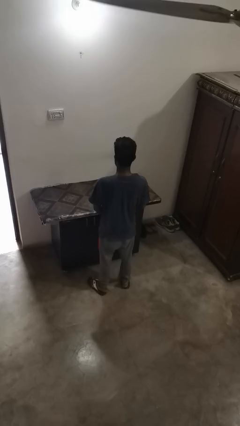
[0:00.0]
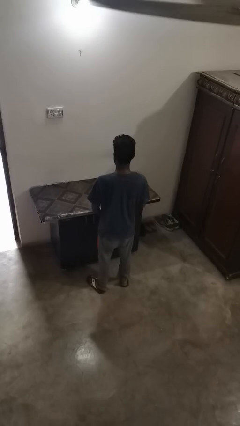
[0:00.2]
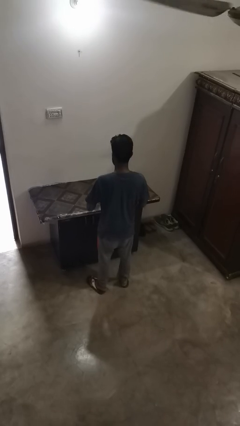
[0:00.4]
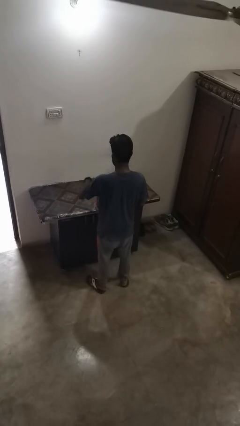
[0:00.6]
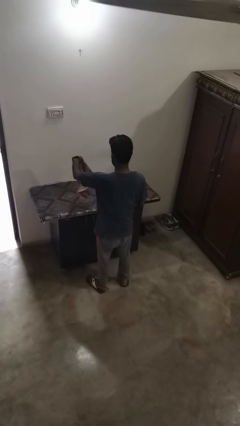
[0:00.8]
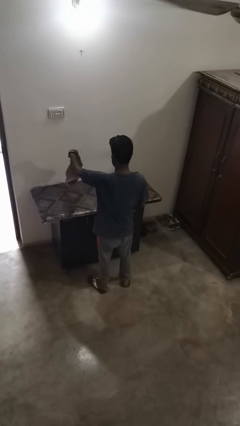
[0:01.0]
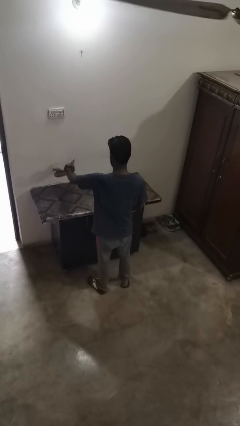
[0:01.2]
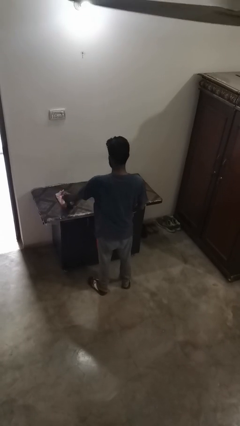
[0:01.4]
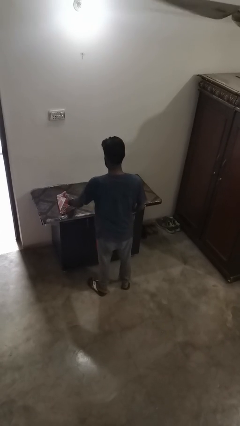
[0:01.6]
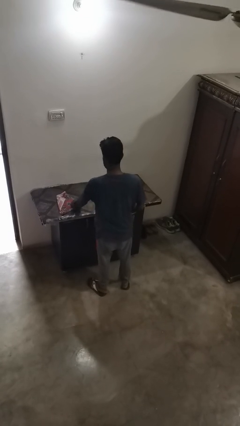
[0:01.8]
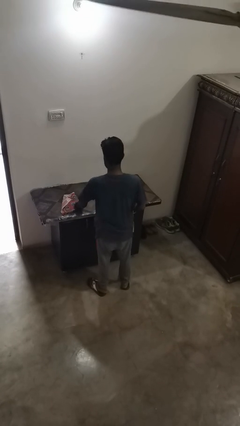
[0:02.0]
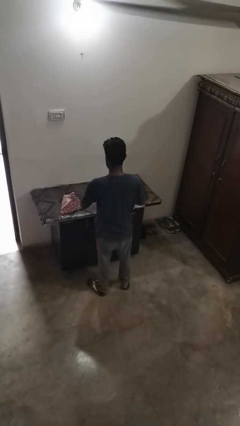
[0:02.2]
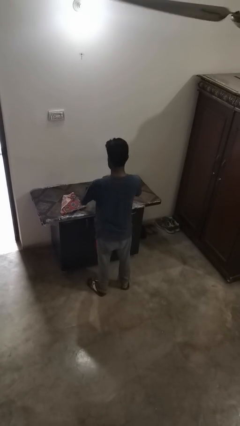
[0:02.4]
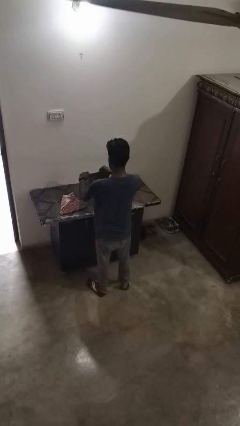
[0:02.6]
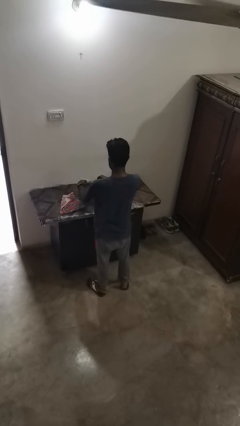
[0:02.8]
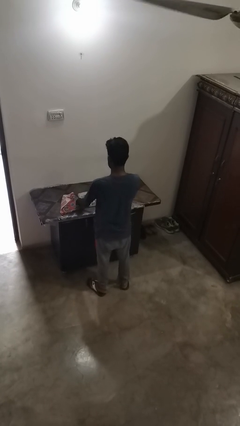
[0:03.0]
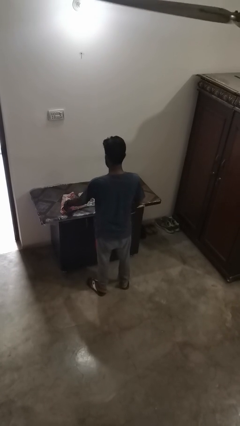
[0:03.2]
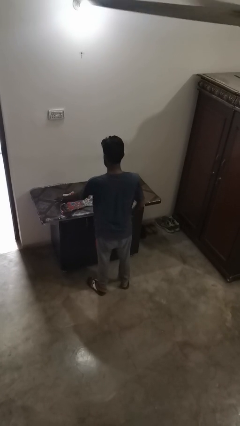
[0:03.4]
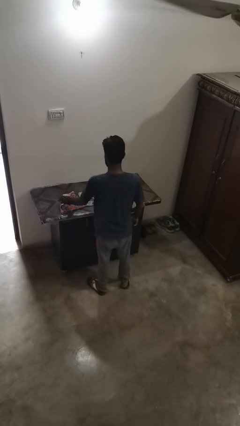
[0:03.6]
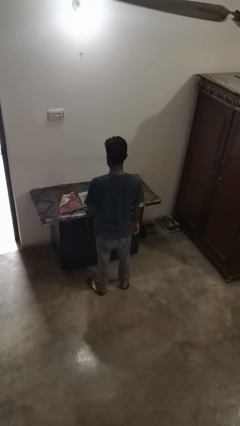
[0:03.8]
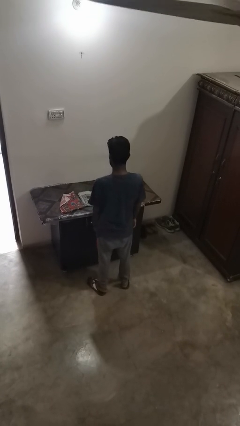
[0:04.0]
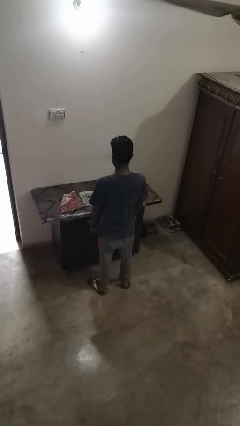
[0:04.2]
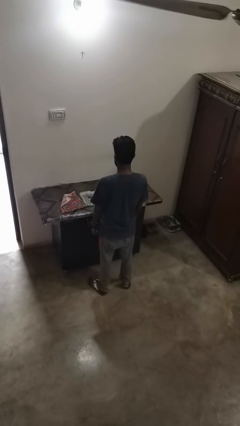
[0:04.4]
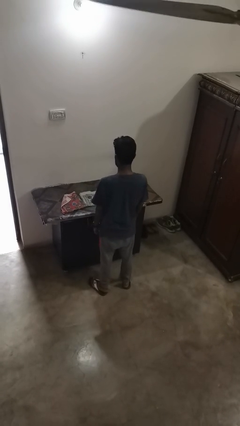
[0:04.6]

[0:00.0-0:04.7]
person spreads tablecloth

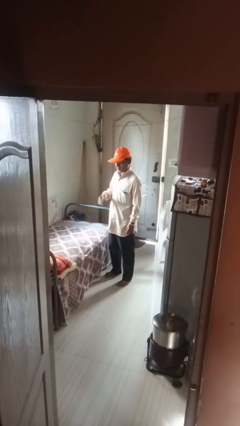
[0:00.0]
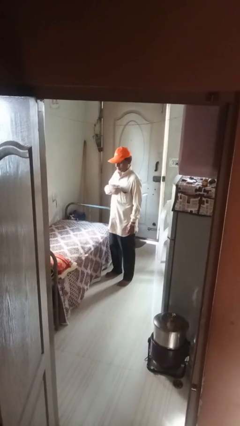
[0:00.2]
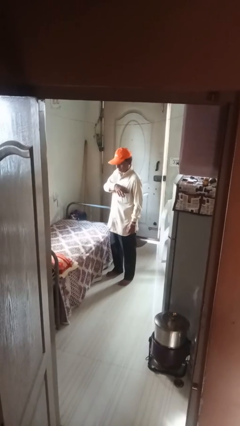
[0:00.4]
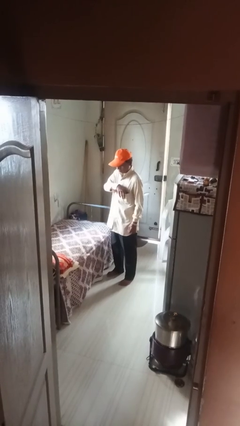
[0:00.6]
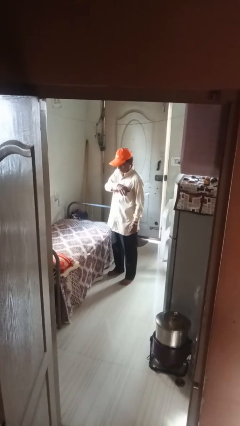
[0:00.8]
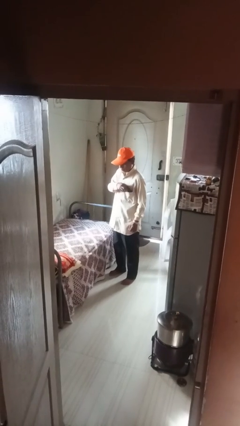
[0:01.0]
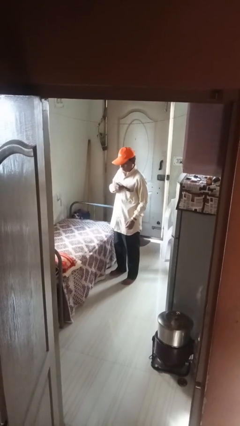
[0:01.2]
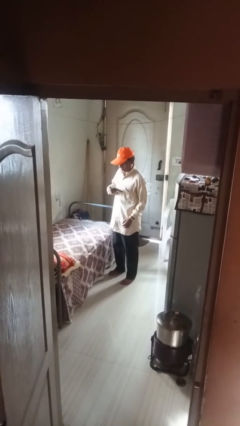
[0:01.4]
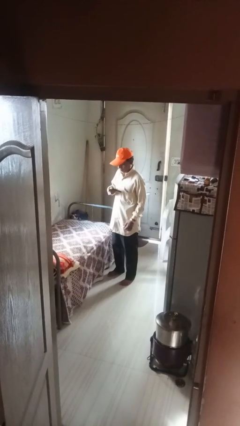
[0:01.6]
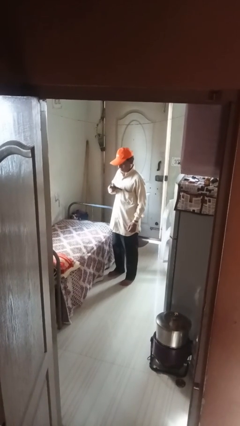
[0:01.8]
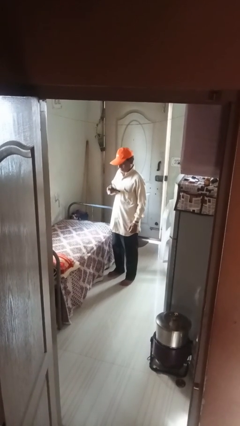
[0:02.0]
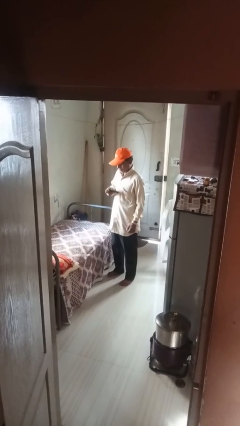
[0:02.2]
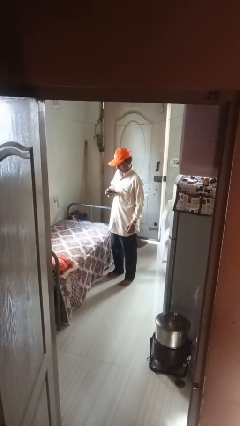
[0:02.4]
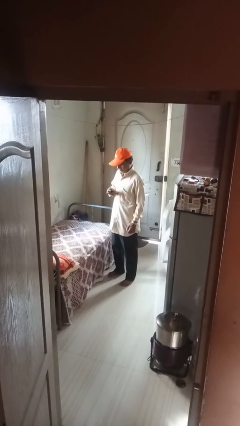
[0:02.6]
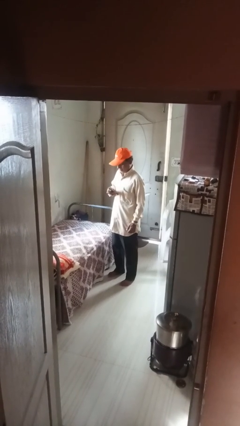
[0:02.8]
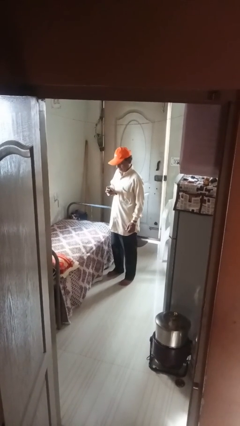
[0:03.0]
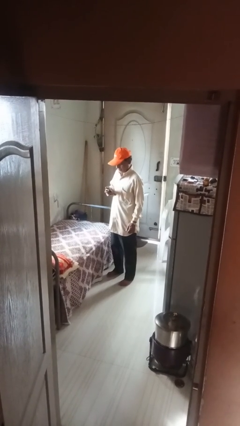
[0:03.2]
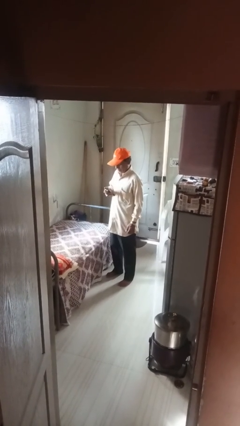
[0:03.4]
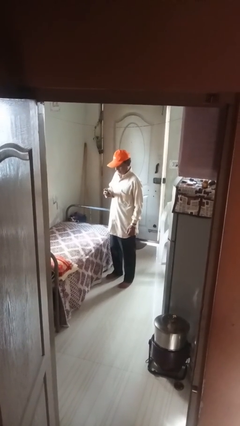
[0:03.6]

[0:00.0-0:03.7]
person takes phone from pocket

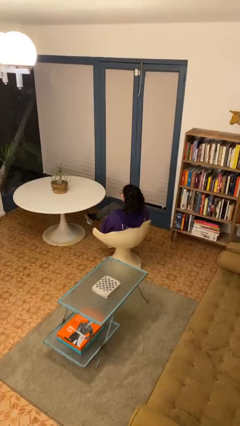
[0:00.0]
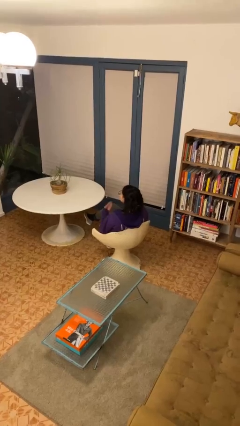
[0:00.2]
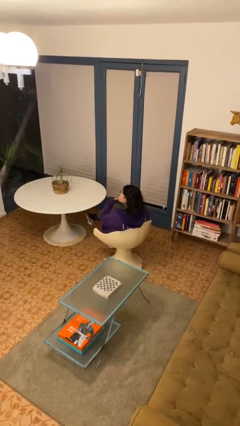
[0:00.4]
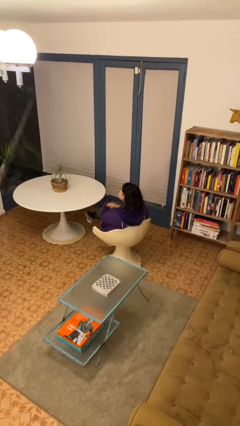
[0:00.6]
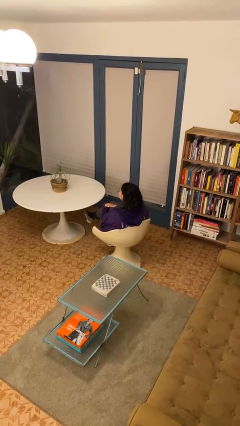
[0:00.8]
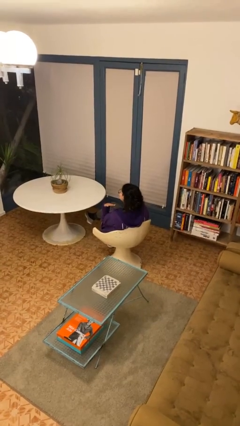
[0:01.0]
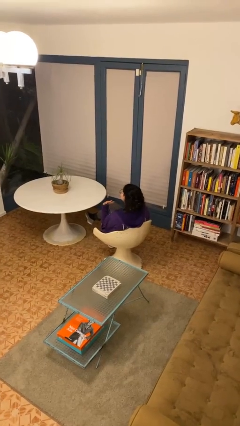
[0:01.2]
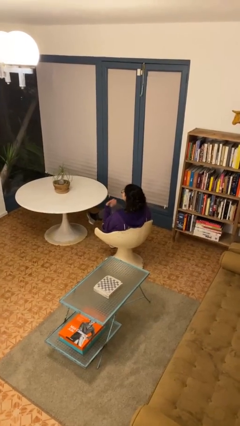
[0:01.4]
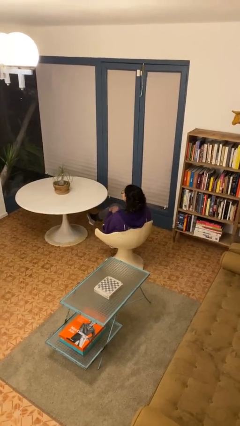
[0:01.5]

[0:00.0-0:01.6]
person gestures cut

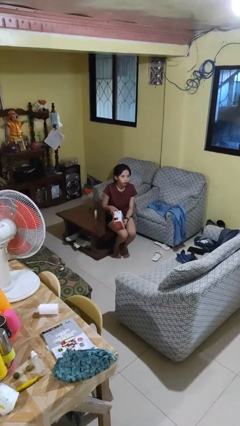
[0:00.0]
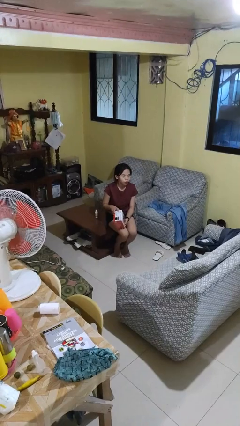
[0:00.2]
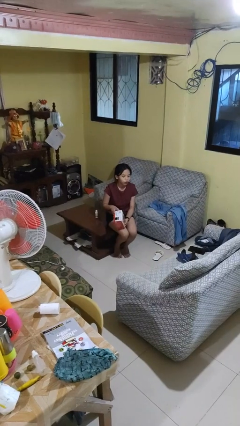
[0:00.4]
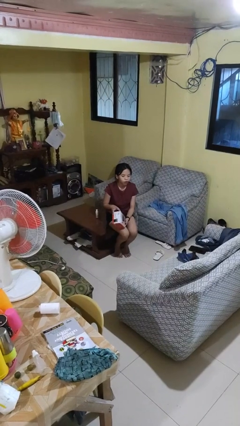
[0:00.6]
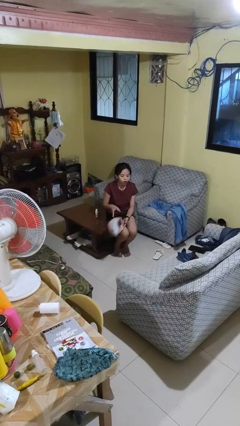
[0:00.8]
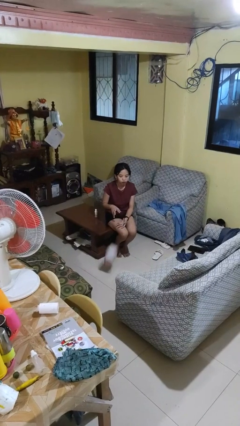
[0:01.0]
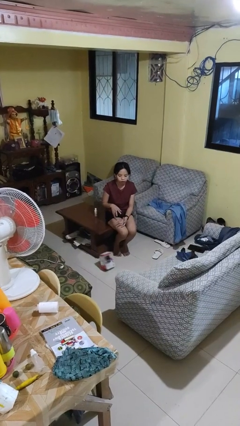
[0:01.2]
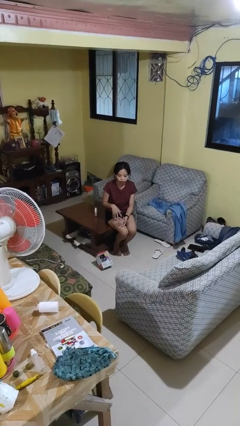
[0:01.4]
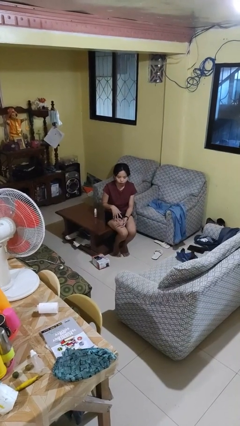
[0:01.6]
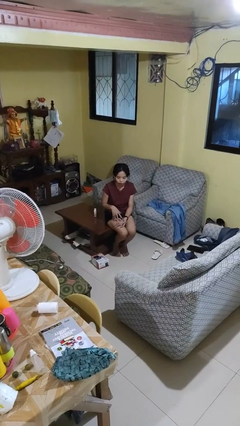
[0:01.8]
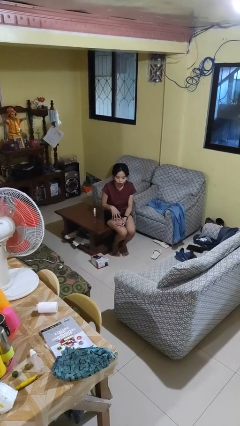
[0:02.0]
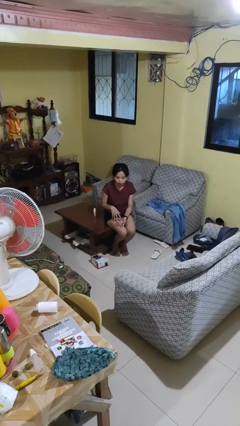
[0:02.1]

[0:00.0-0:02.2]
person drops object

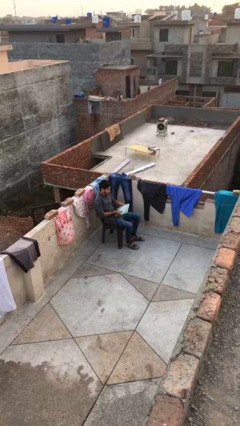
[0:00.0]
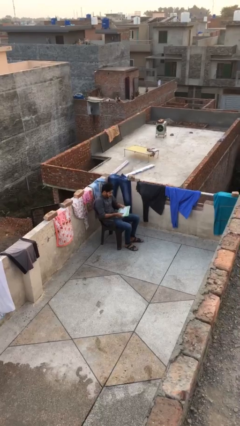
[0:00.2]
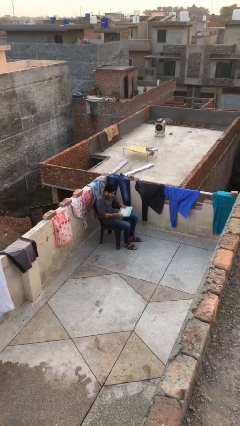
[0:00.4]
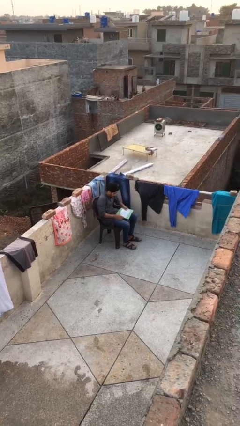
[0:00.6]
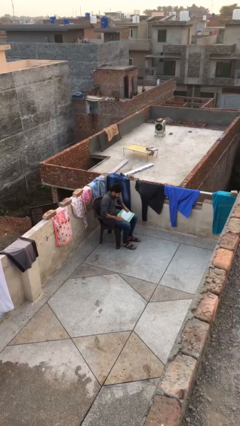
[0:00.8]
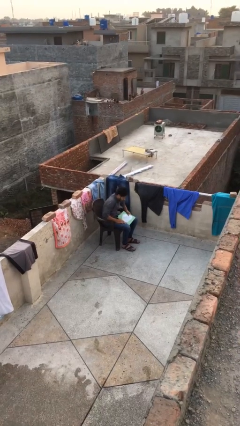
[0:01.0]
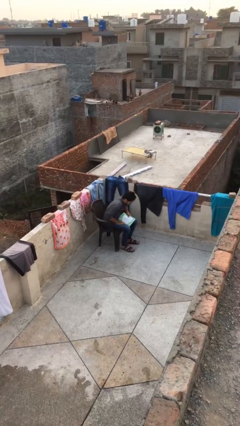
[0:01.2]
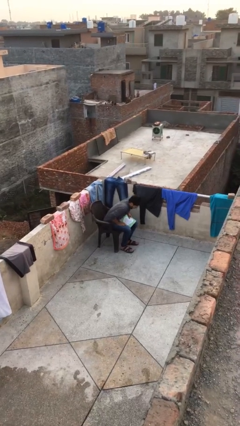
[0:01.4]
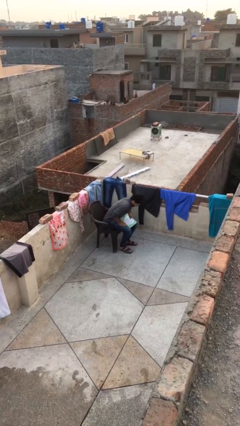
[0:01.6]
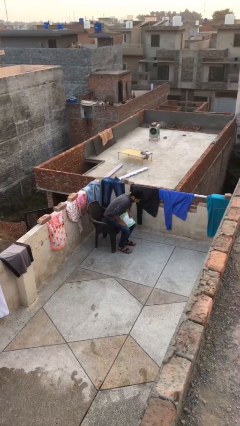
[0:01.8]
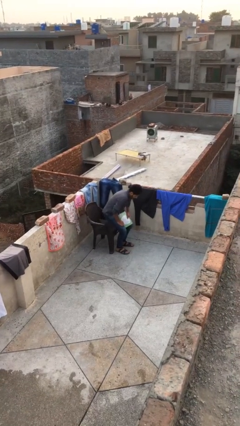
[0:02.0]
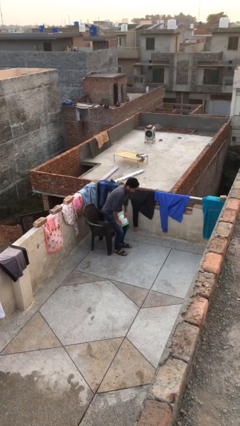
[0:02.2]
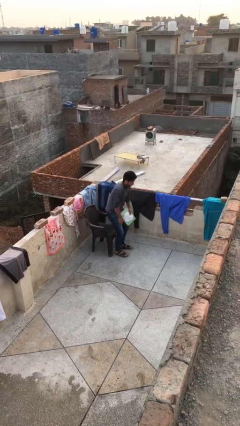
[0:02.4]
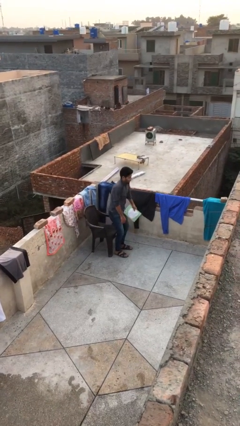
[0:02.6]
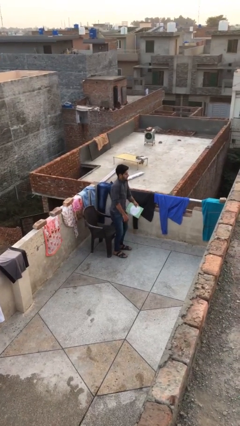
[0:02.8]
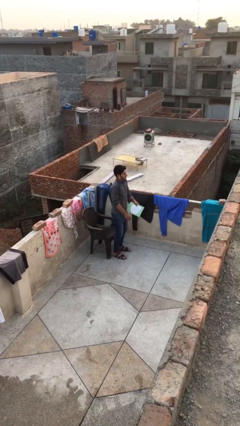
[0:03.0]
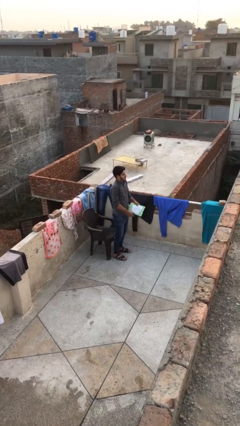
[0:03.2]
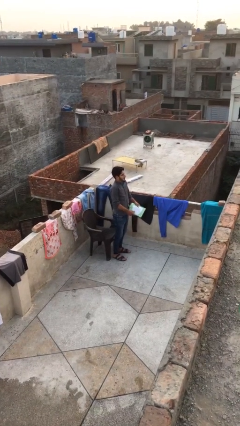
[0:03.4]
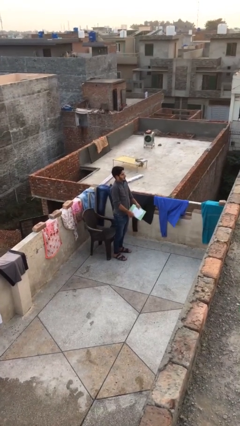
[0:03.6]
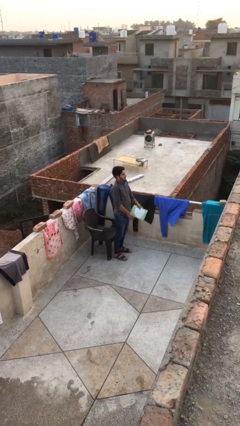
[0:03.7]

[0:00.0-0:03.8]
person stands up

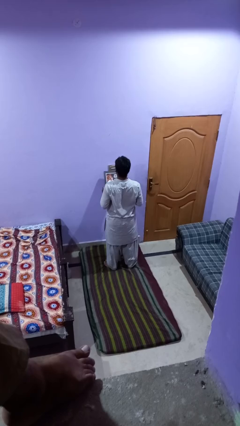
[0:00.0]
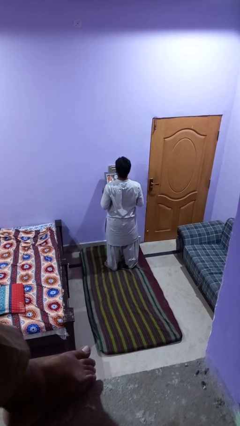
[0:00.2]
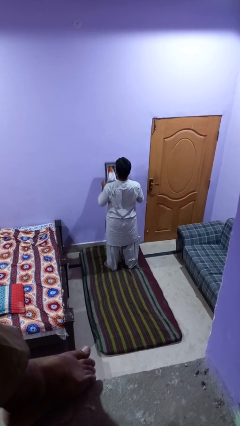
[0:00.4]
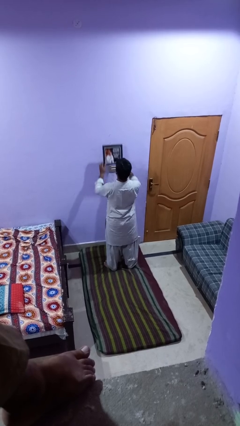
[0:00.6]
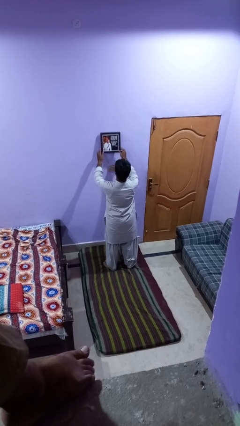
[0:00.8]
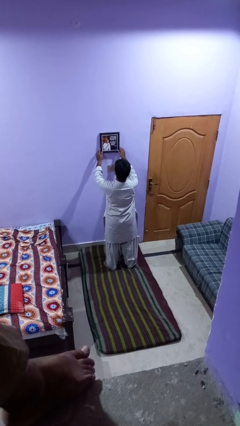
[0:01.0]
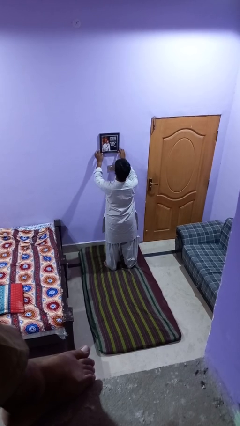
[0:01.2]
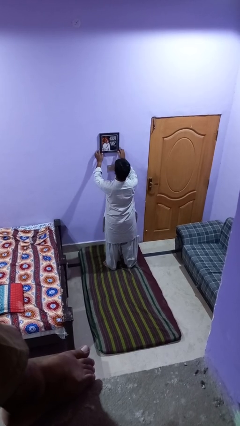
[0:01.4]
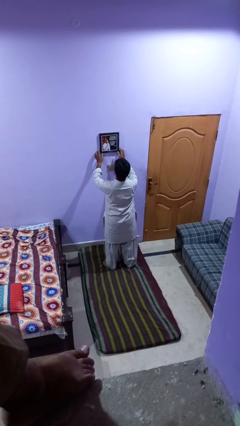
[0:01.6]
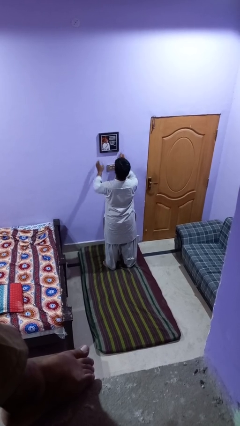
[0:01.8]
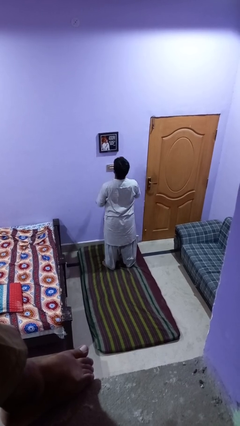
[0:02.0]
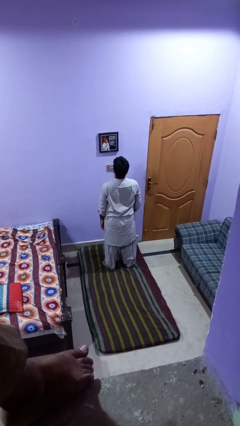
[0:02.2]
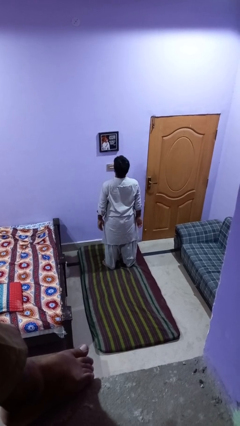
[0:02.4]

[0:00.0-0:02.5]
person puts up picture frame
